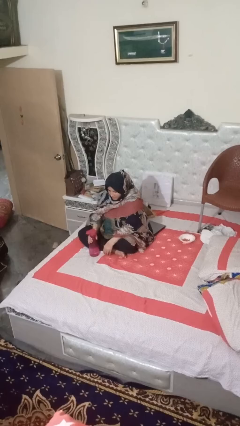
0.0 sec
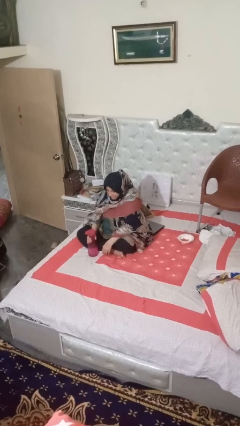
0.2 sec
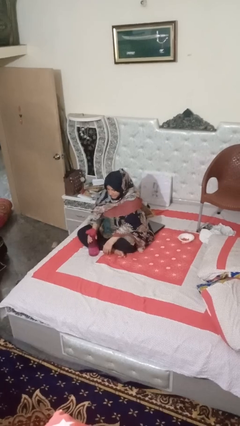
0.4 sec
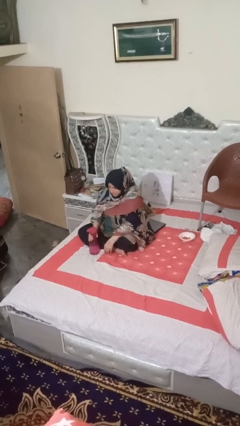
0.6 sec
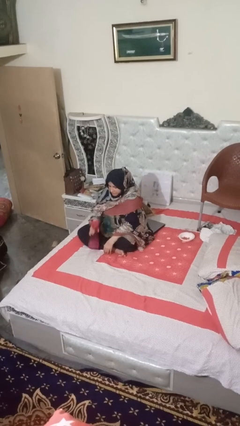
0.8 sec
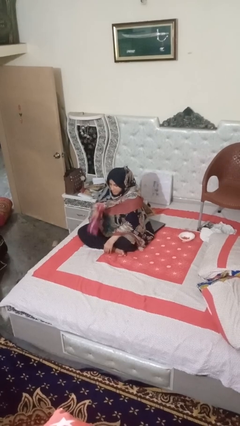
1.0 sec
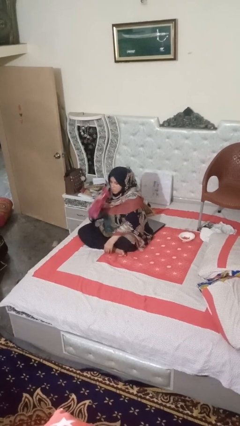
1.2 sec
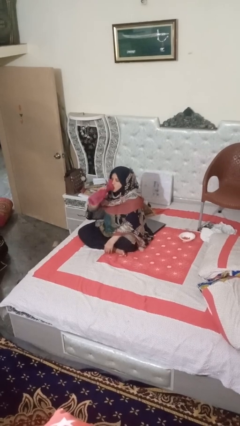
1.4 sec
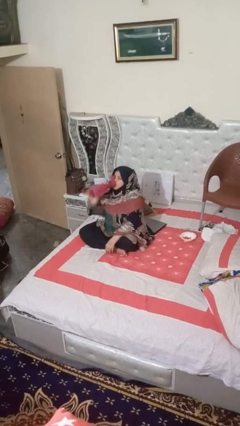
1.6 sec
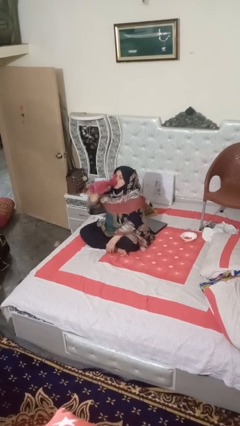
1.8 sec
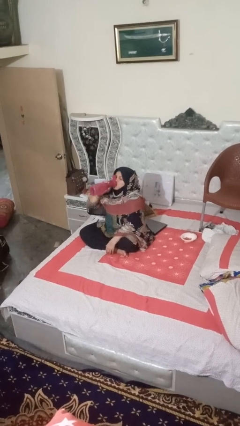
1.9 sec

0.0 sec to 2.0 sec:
person drinks from bottle

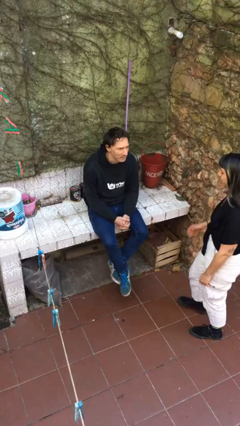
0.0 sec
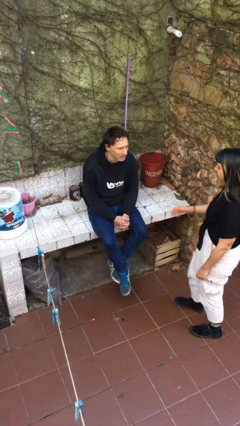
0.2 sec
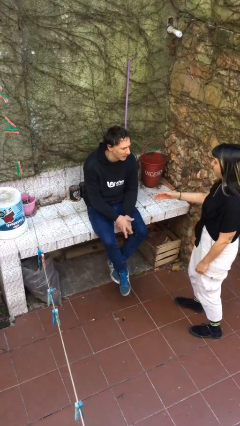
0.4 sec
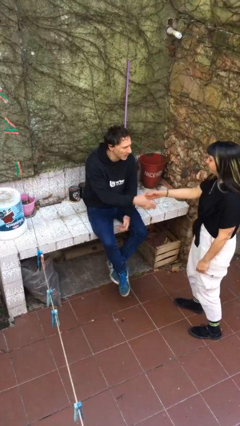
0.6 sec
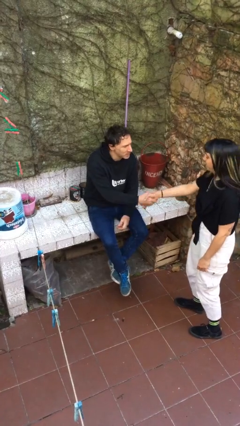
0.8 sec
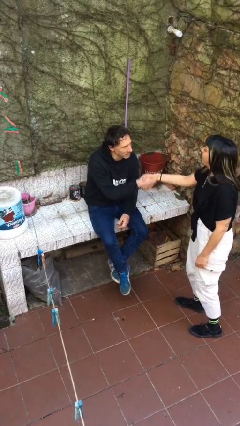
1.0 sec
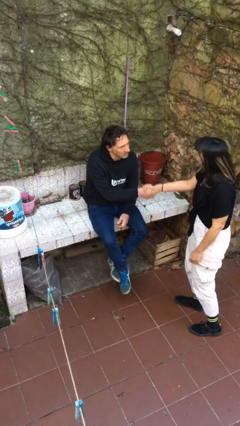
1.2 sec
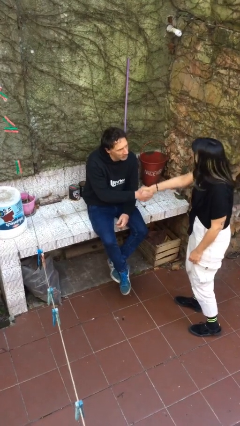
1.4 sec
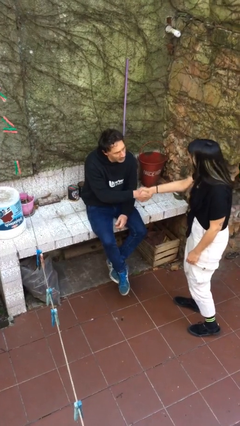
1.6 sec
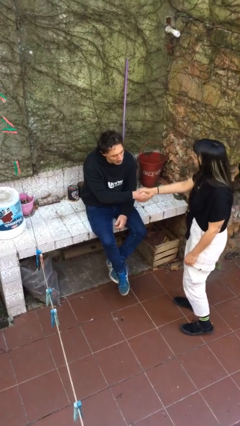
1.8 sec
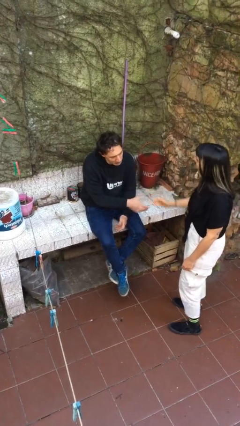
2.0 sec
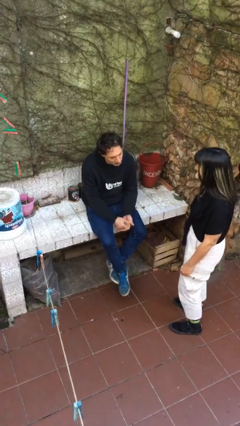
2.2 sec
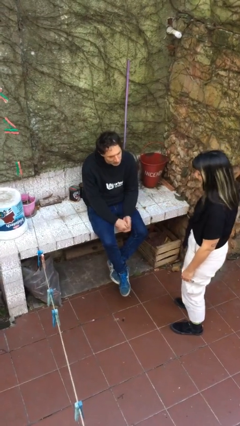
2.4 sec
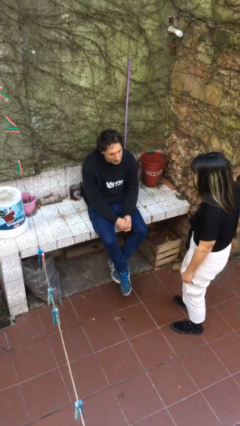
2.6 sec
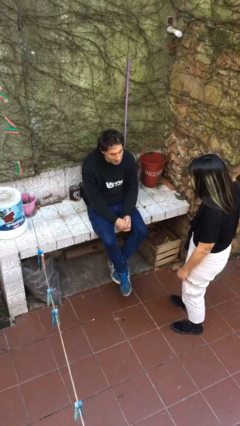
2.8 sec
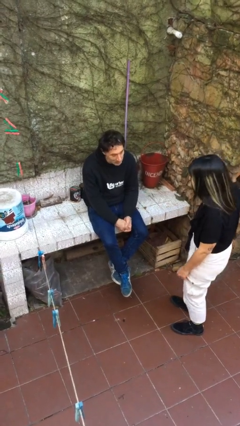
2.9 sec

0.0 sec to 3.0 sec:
person shakes hand

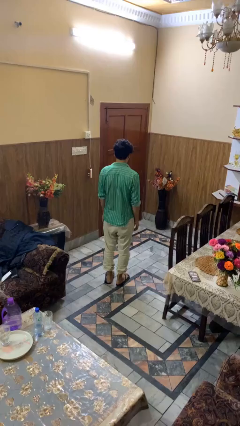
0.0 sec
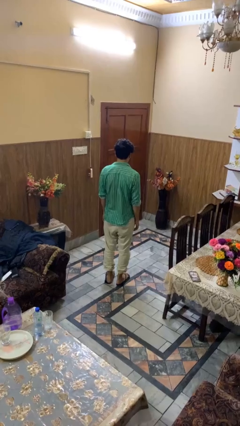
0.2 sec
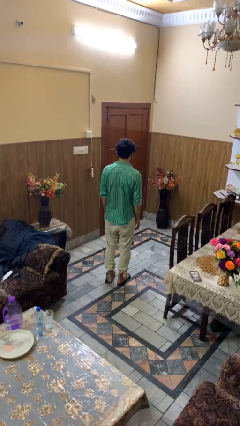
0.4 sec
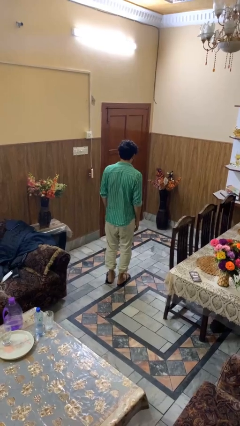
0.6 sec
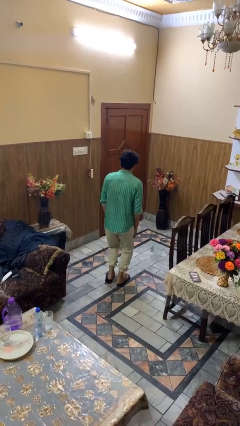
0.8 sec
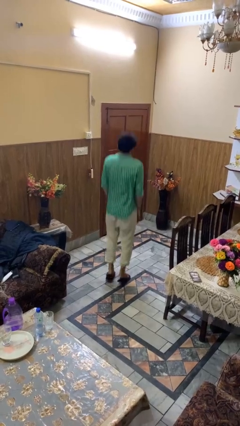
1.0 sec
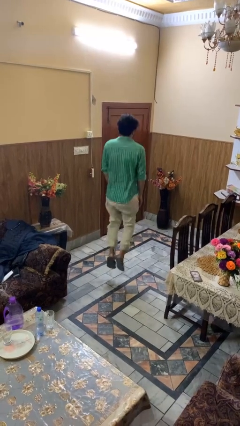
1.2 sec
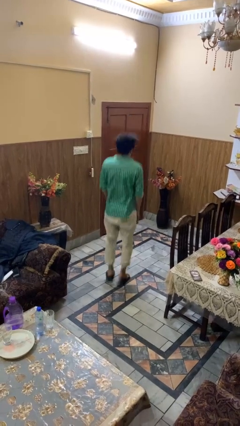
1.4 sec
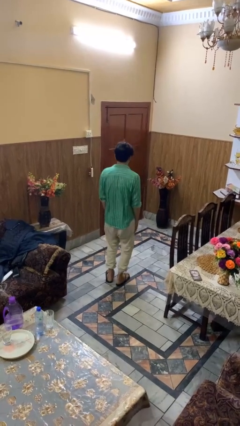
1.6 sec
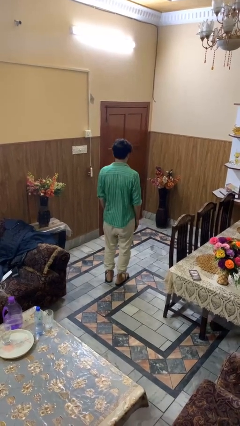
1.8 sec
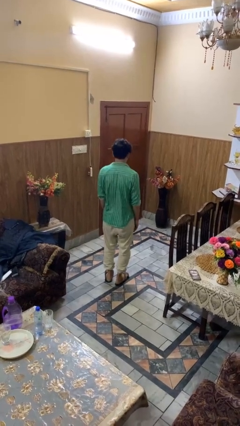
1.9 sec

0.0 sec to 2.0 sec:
person jumps

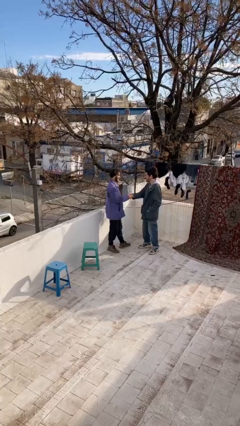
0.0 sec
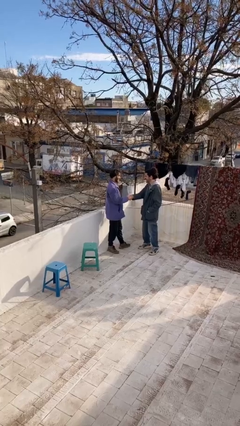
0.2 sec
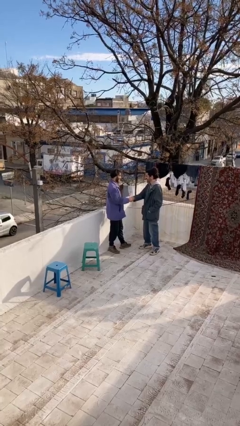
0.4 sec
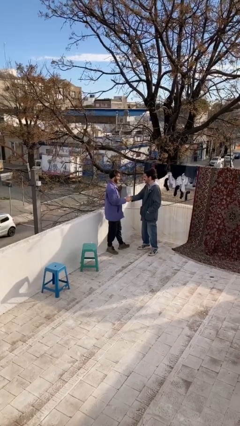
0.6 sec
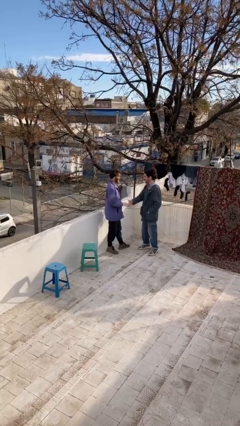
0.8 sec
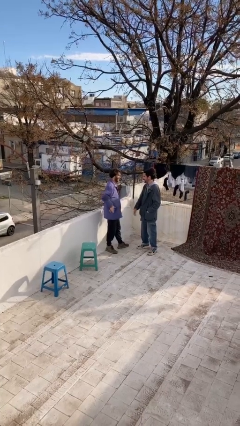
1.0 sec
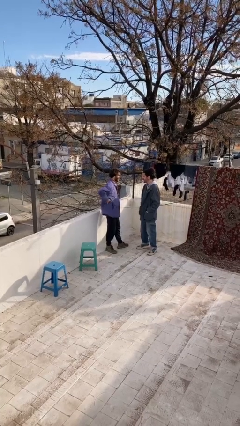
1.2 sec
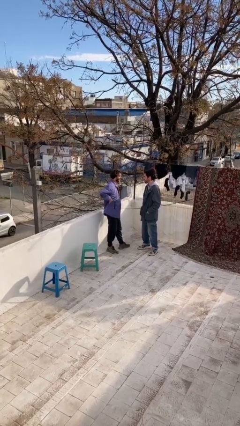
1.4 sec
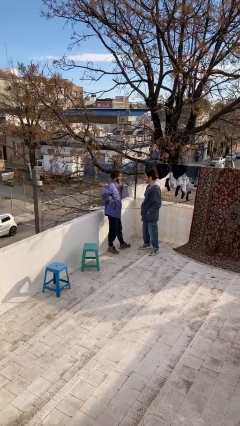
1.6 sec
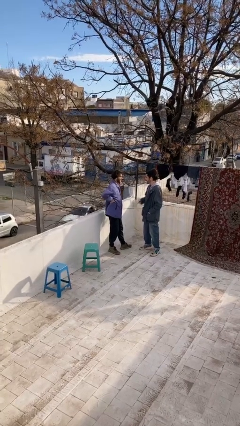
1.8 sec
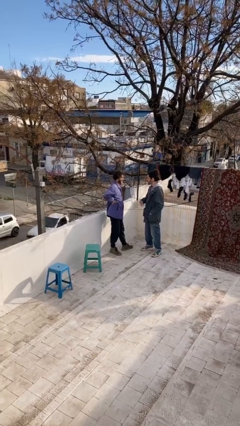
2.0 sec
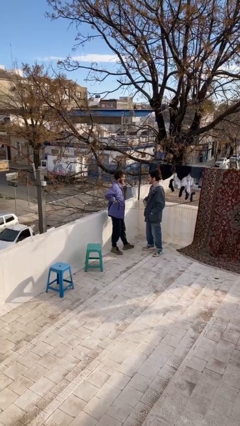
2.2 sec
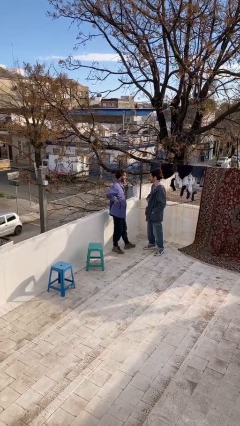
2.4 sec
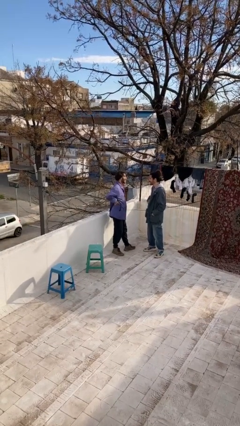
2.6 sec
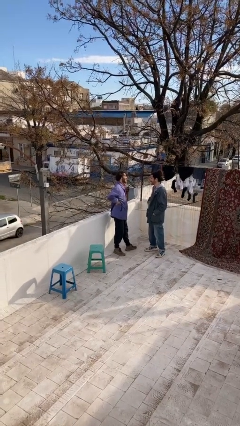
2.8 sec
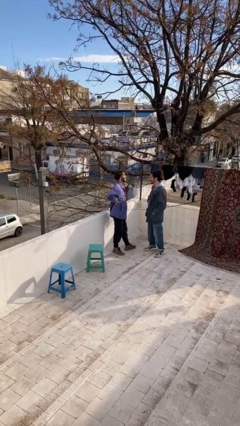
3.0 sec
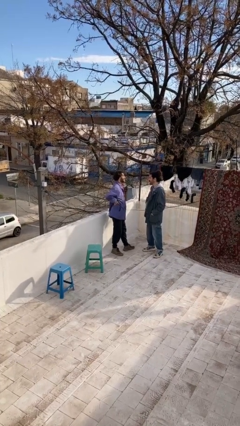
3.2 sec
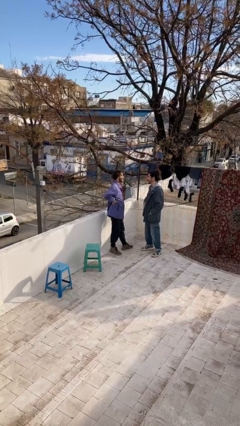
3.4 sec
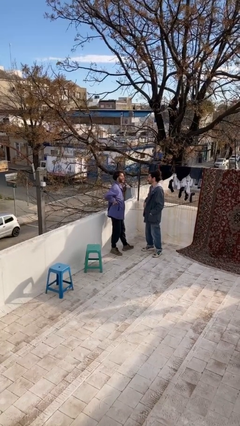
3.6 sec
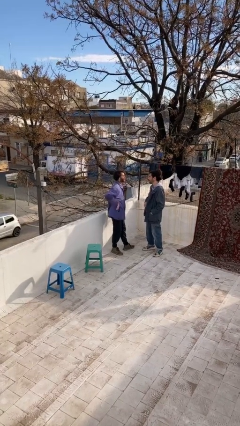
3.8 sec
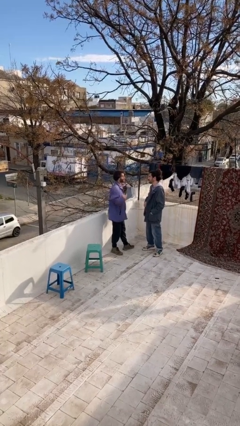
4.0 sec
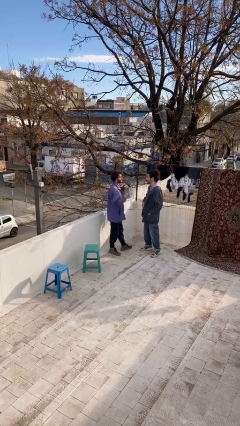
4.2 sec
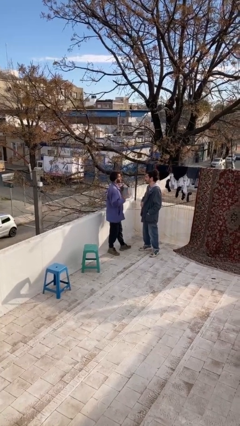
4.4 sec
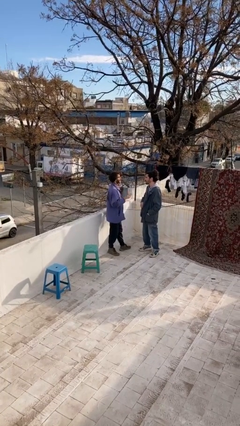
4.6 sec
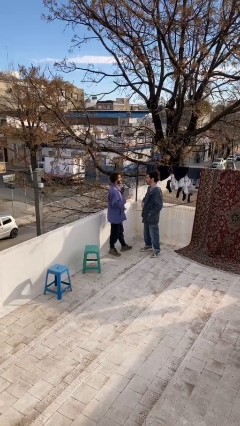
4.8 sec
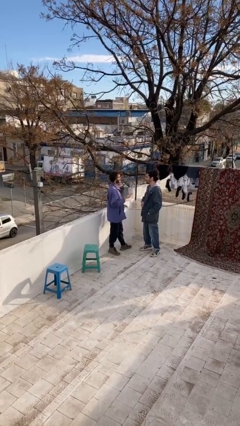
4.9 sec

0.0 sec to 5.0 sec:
person talks to person

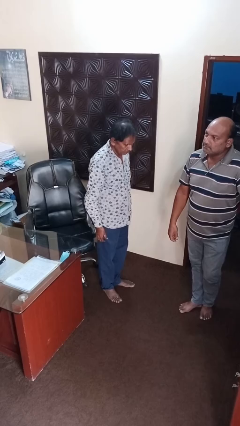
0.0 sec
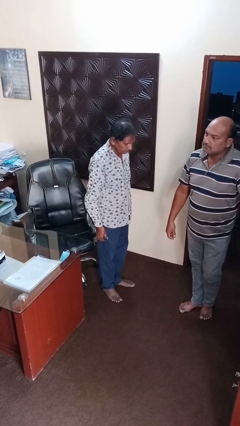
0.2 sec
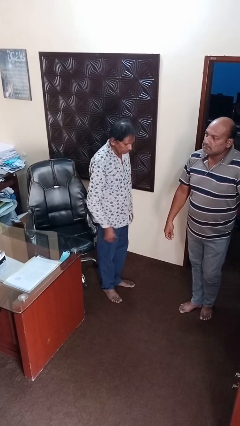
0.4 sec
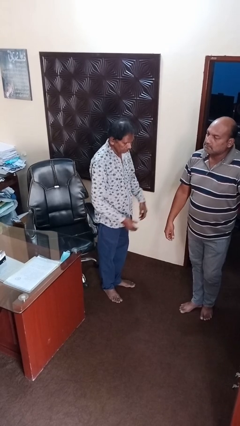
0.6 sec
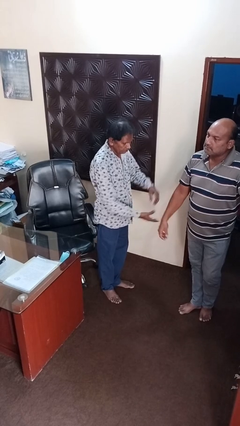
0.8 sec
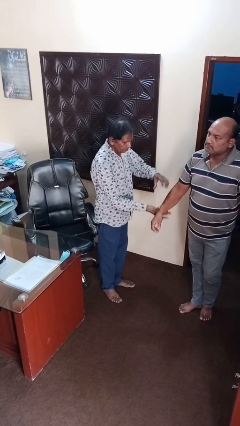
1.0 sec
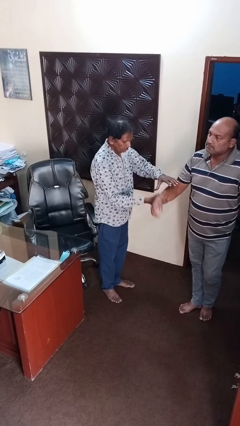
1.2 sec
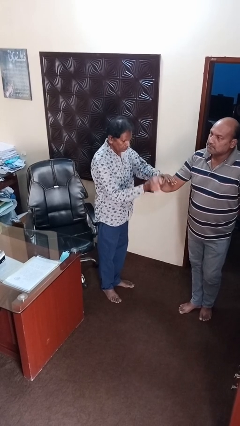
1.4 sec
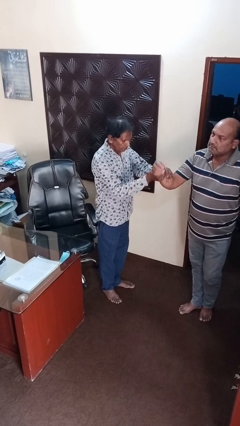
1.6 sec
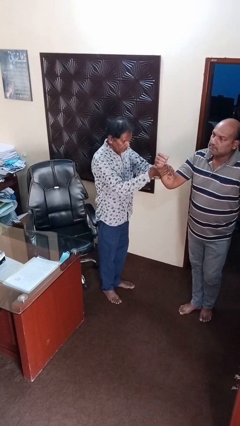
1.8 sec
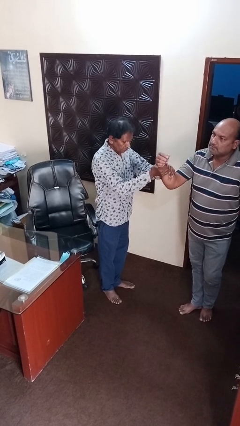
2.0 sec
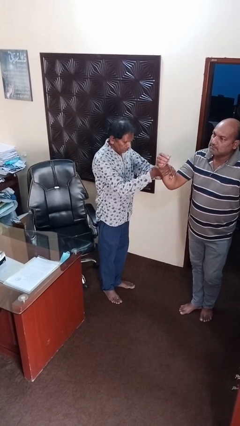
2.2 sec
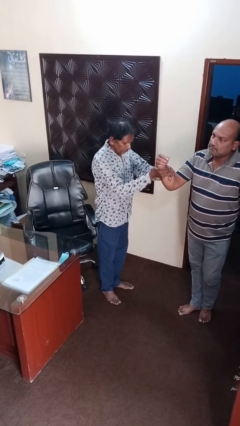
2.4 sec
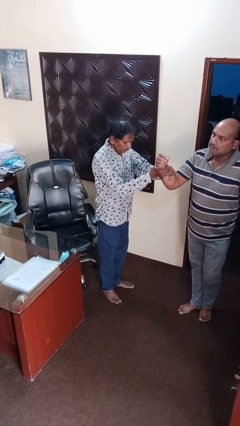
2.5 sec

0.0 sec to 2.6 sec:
person grabs person by forearm

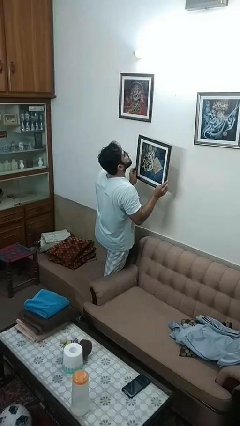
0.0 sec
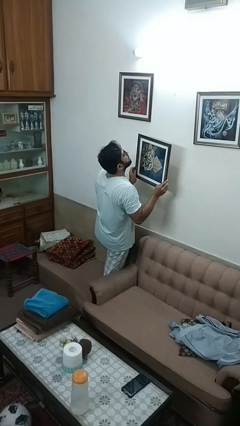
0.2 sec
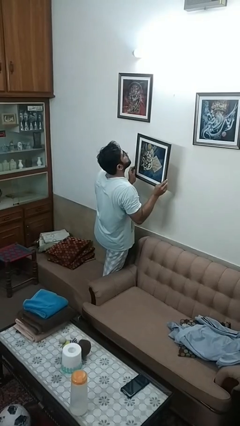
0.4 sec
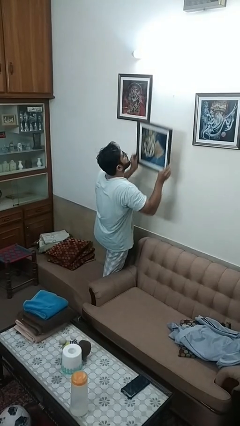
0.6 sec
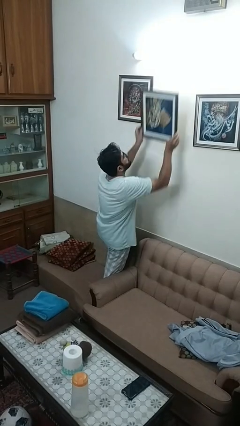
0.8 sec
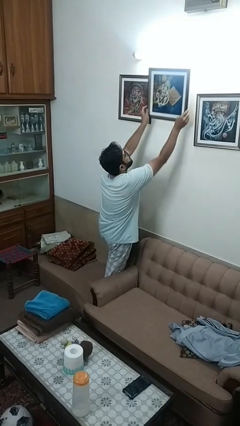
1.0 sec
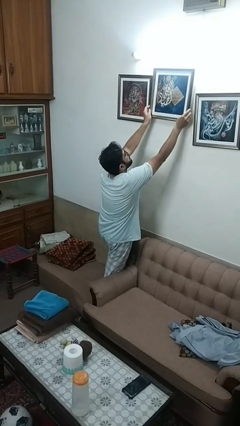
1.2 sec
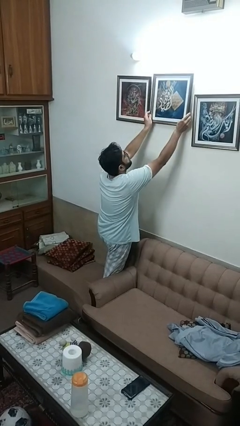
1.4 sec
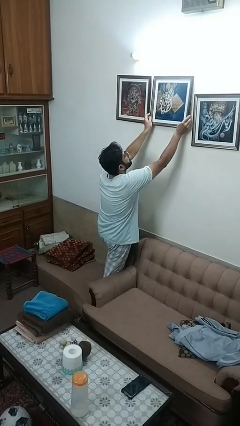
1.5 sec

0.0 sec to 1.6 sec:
person puts up picture frame

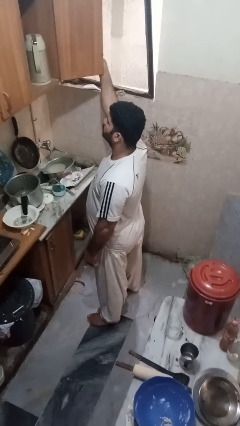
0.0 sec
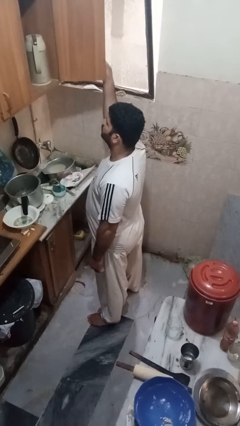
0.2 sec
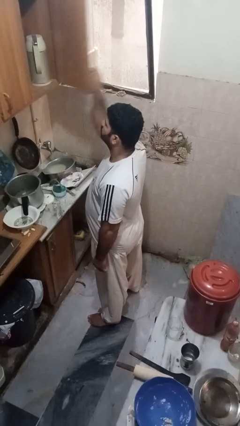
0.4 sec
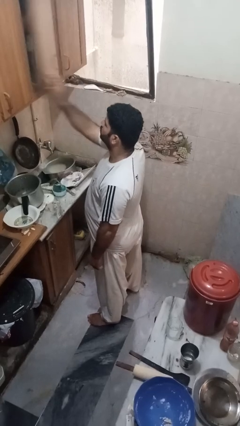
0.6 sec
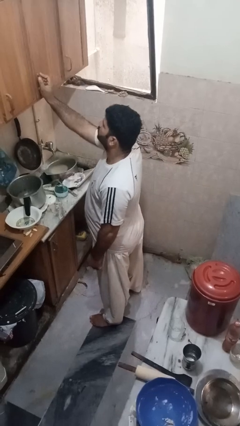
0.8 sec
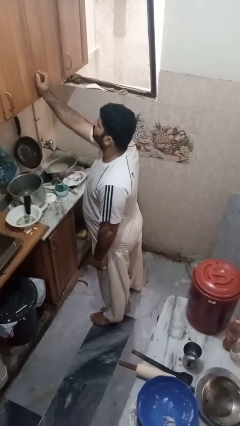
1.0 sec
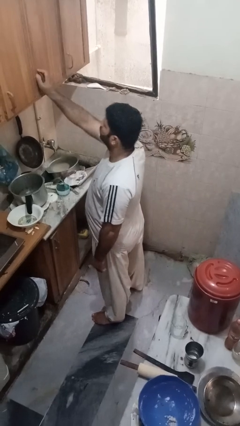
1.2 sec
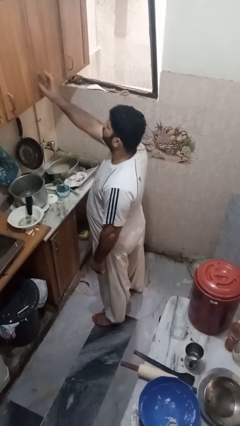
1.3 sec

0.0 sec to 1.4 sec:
person closes cabinet
